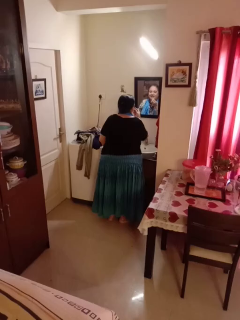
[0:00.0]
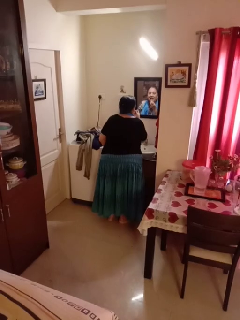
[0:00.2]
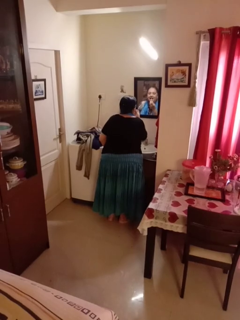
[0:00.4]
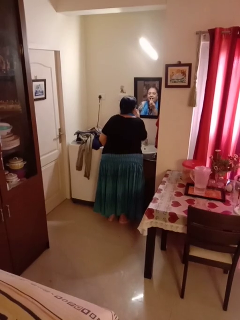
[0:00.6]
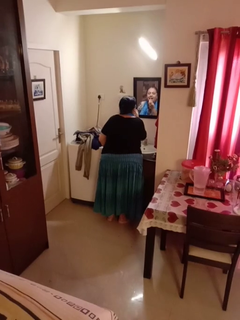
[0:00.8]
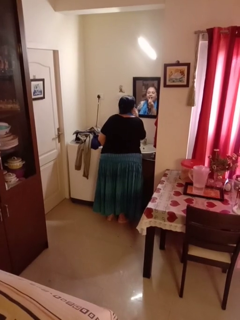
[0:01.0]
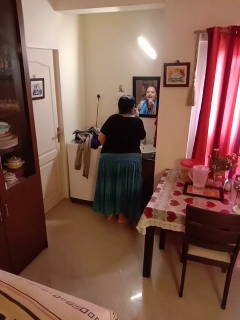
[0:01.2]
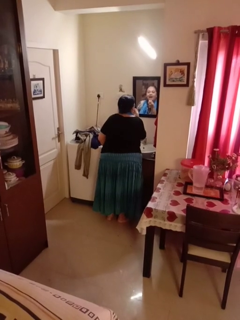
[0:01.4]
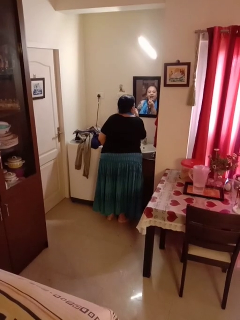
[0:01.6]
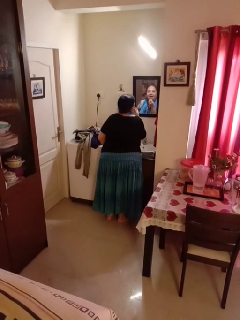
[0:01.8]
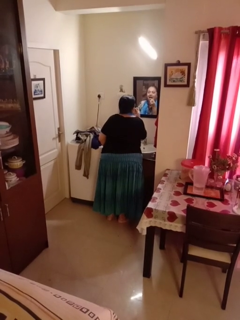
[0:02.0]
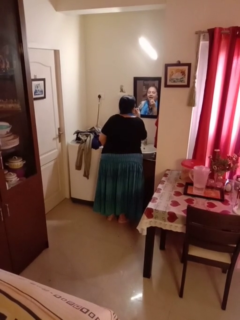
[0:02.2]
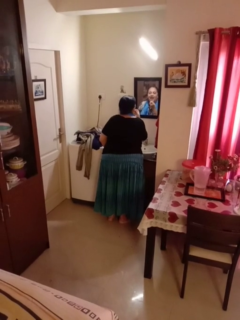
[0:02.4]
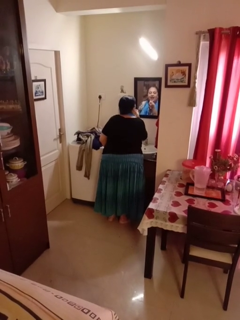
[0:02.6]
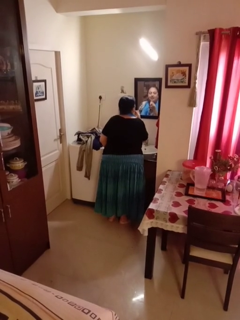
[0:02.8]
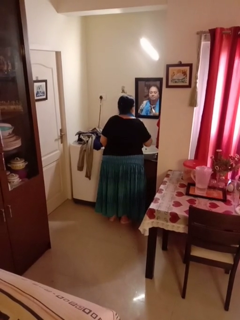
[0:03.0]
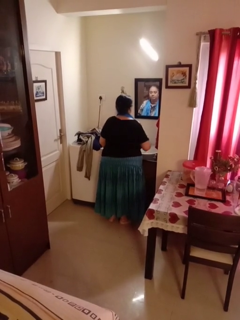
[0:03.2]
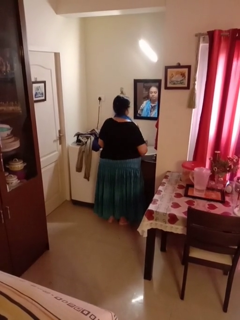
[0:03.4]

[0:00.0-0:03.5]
person applies lip makeup

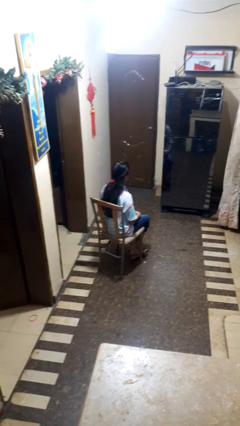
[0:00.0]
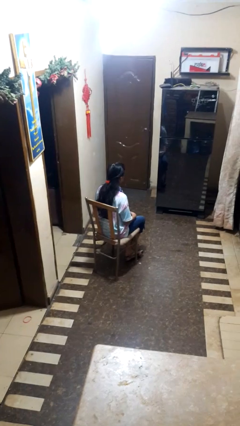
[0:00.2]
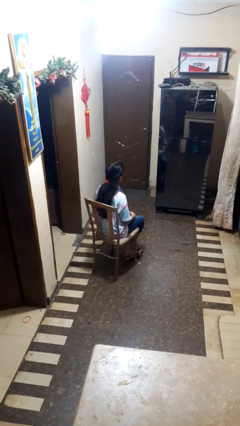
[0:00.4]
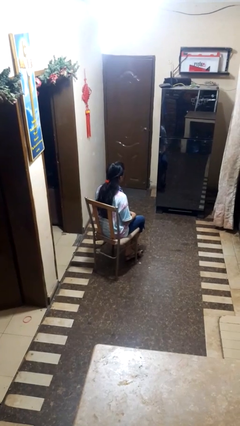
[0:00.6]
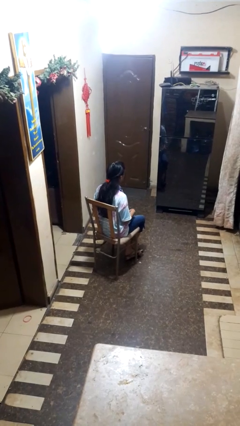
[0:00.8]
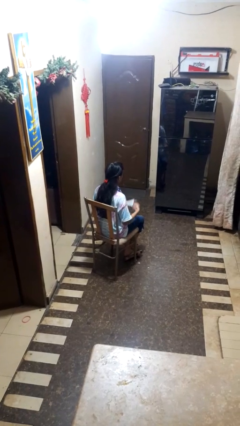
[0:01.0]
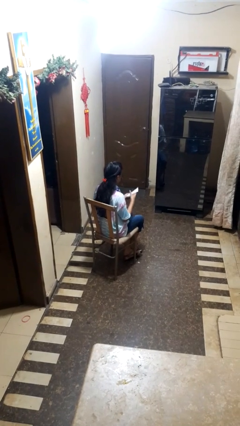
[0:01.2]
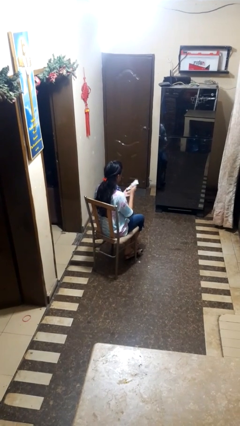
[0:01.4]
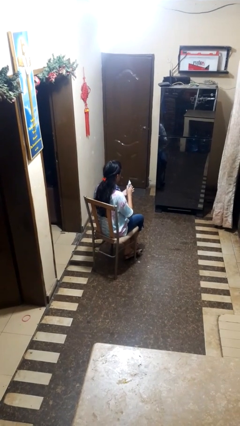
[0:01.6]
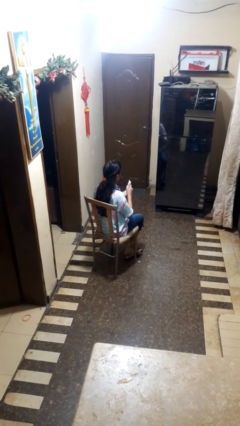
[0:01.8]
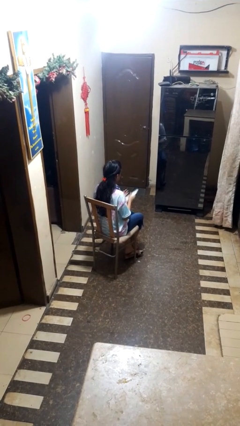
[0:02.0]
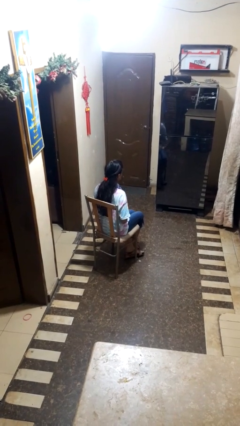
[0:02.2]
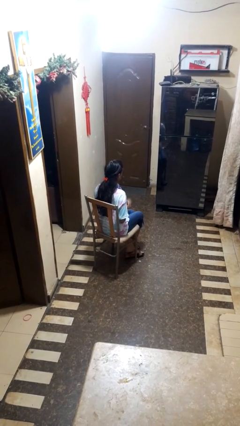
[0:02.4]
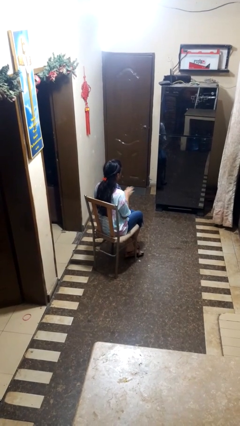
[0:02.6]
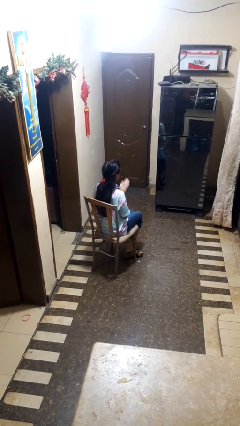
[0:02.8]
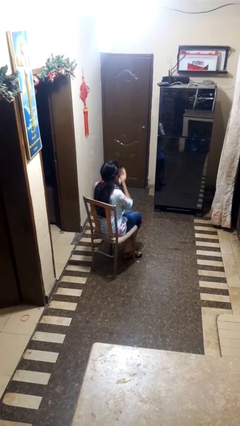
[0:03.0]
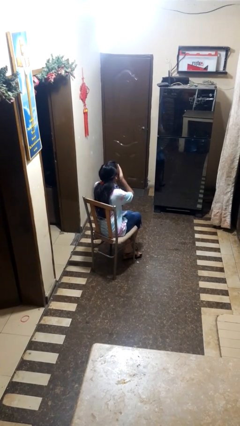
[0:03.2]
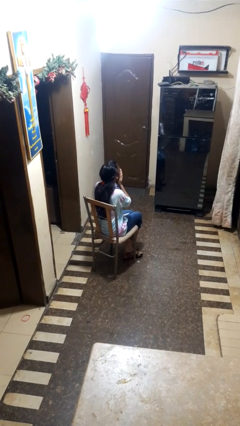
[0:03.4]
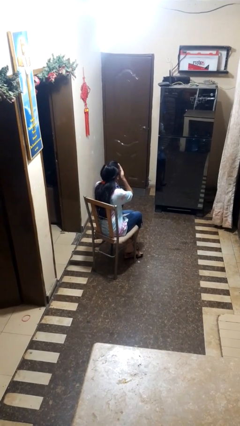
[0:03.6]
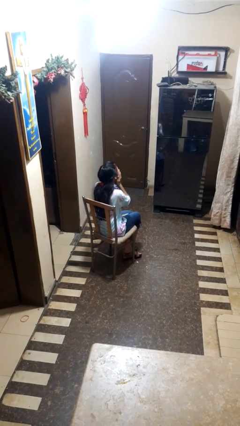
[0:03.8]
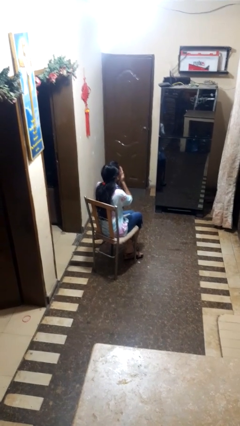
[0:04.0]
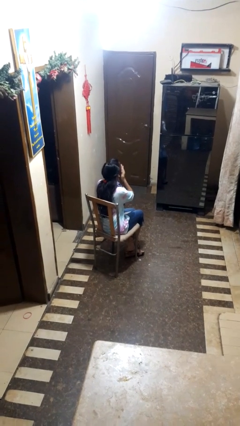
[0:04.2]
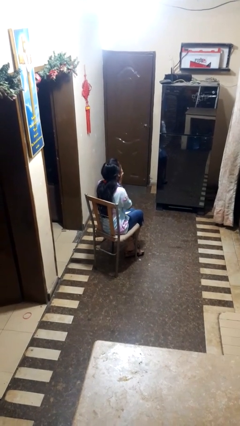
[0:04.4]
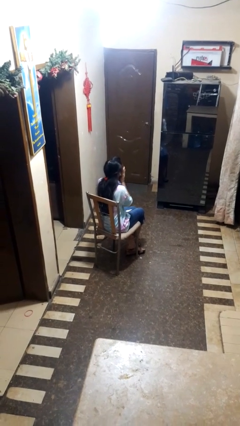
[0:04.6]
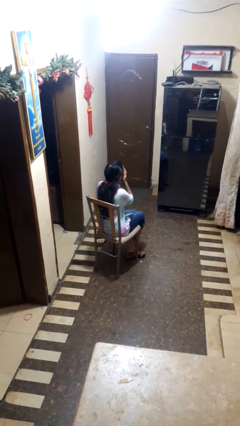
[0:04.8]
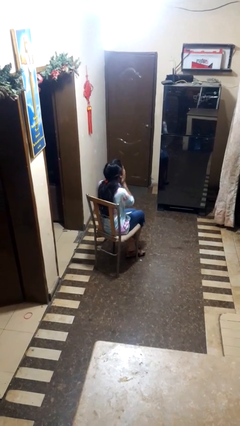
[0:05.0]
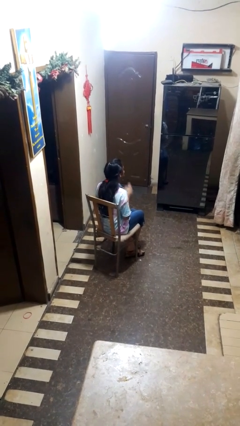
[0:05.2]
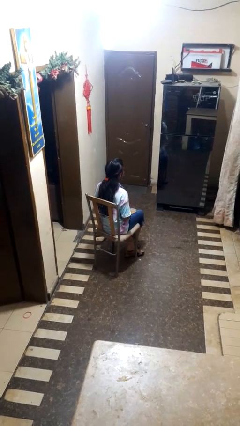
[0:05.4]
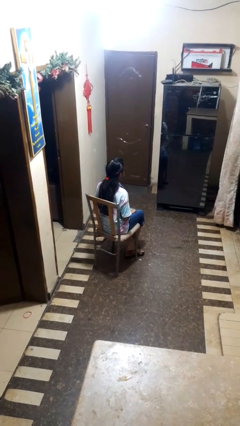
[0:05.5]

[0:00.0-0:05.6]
person applies sunscreen

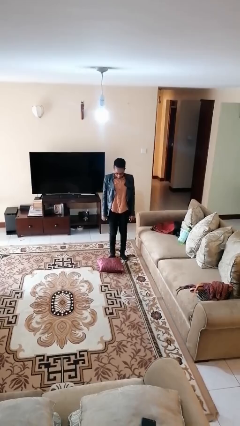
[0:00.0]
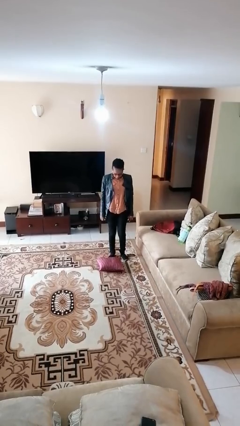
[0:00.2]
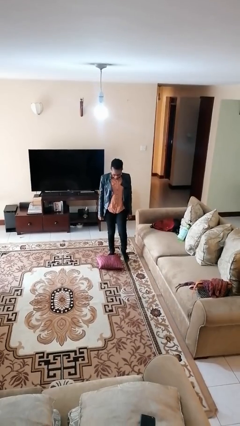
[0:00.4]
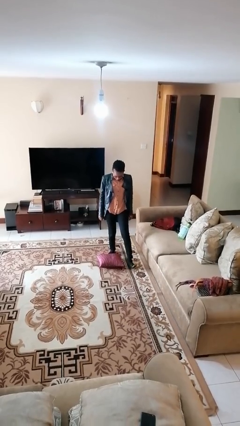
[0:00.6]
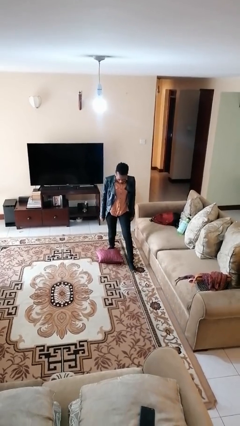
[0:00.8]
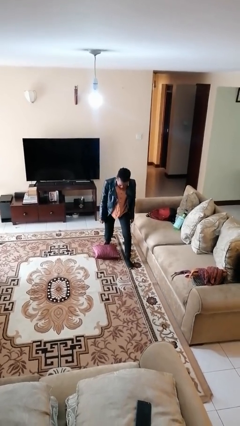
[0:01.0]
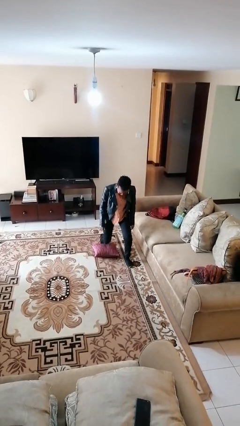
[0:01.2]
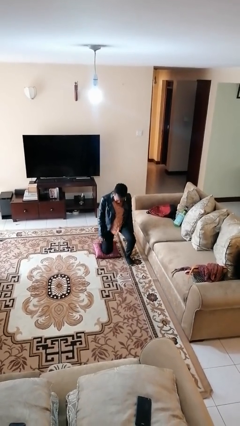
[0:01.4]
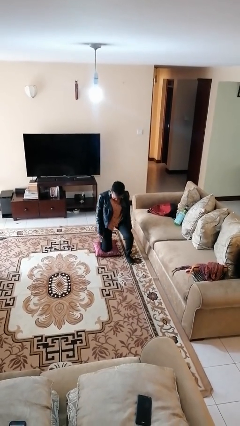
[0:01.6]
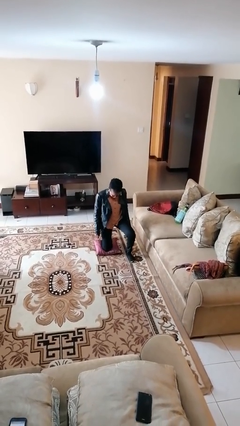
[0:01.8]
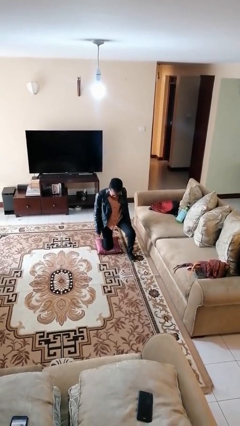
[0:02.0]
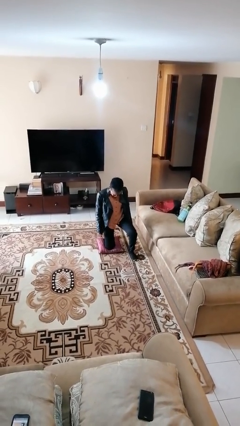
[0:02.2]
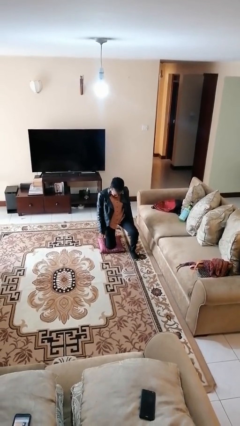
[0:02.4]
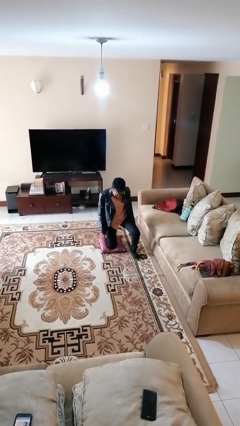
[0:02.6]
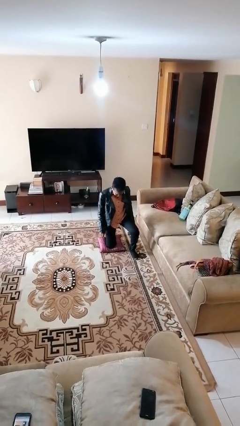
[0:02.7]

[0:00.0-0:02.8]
person kneels

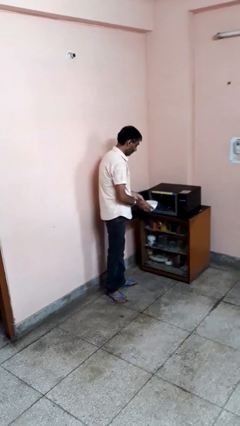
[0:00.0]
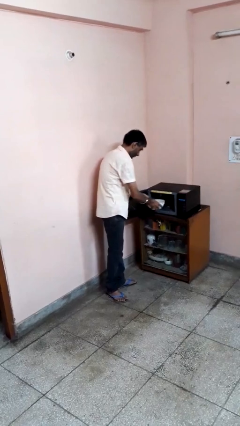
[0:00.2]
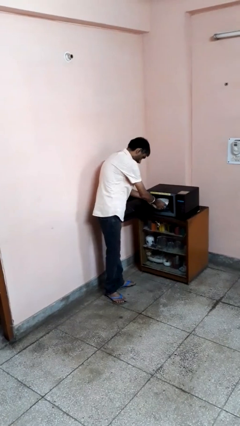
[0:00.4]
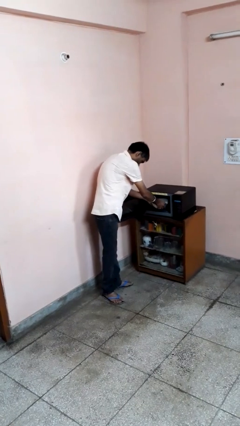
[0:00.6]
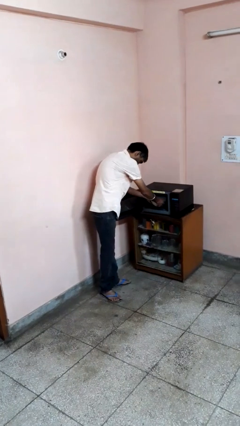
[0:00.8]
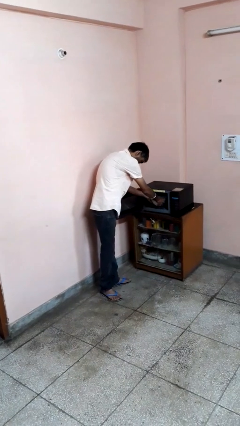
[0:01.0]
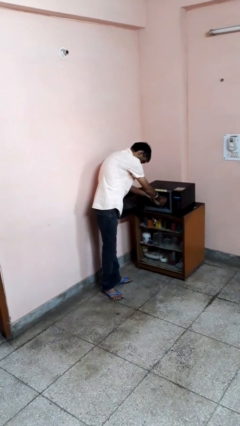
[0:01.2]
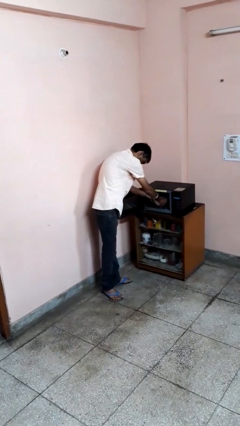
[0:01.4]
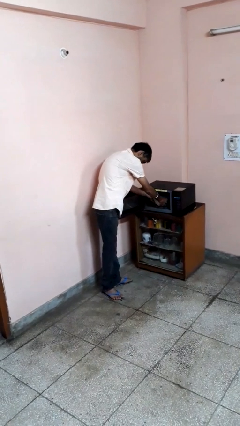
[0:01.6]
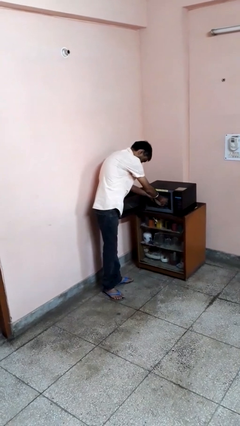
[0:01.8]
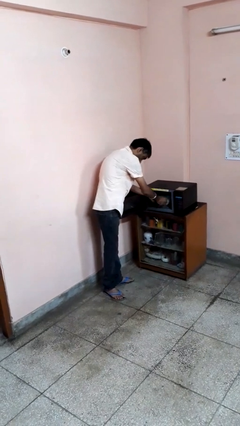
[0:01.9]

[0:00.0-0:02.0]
person puts object into microwave

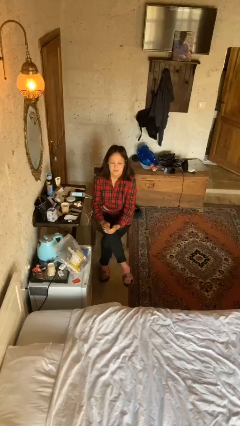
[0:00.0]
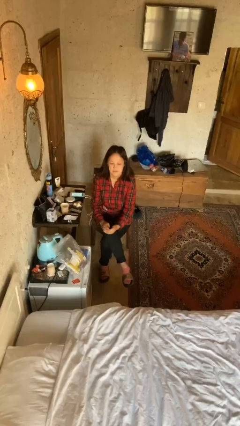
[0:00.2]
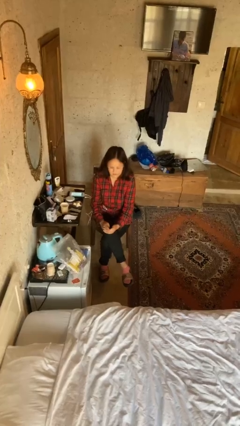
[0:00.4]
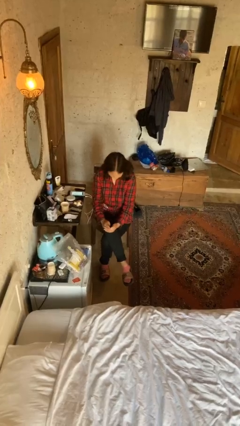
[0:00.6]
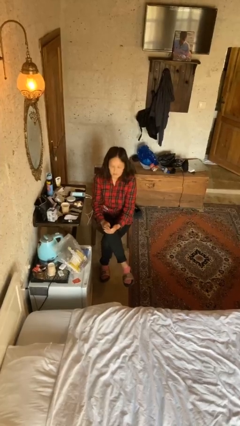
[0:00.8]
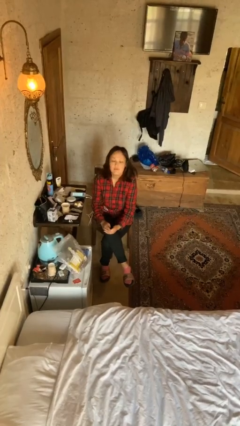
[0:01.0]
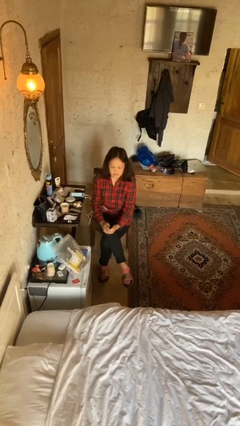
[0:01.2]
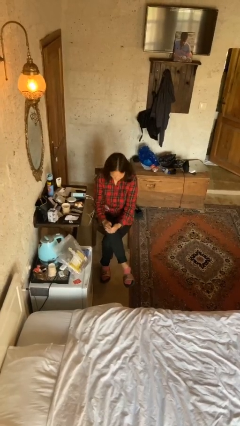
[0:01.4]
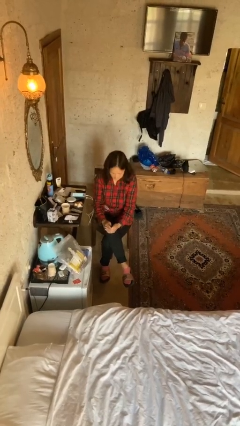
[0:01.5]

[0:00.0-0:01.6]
person nods head

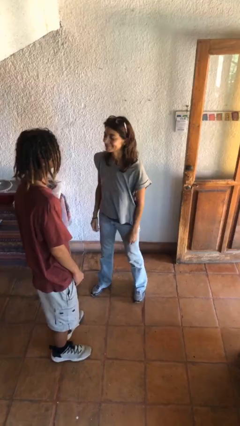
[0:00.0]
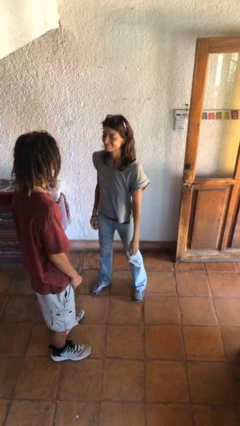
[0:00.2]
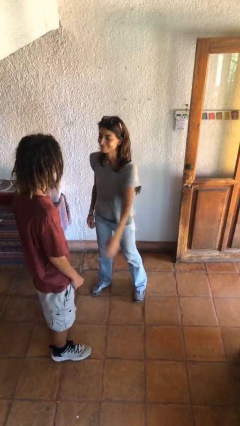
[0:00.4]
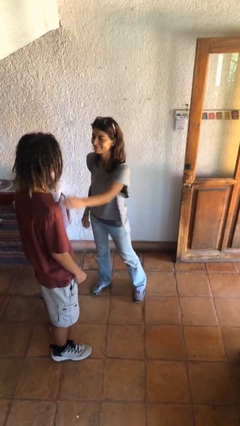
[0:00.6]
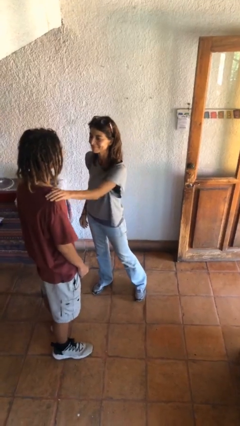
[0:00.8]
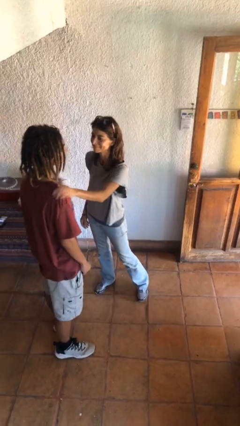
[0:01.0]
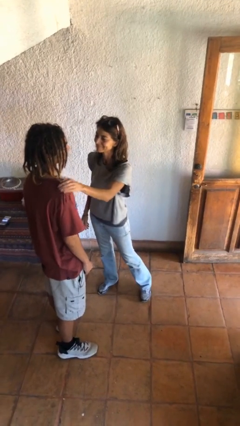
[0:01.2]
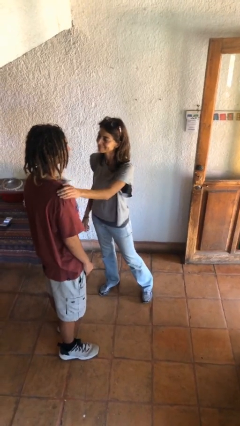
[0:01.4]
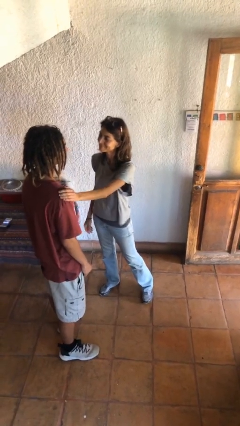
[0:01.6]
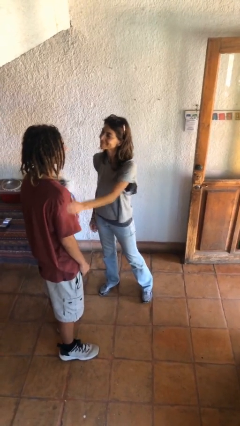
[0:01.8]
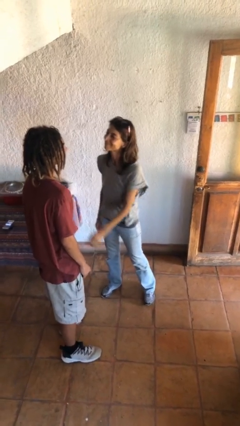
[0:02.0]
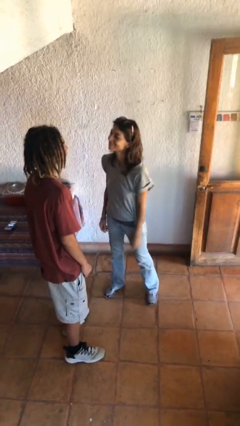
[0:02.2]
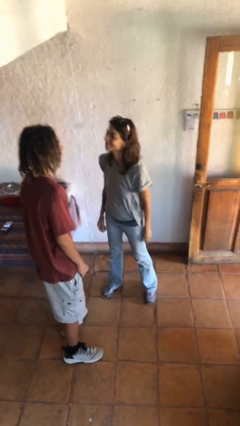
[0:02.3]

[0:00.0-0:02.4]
person pounds shoulders of person
